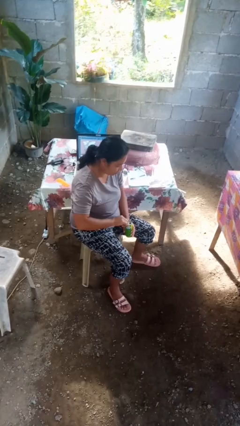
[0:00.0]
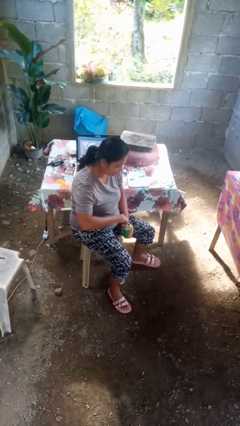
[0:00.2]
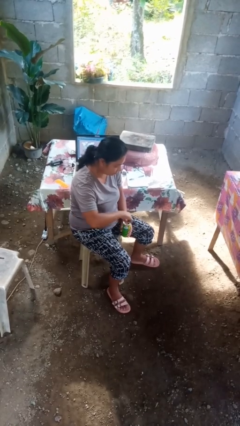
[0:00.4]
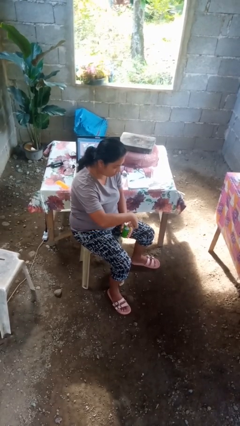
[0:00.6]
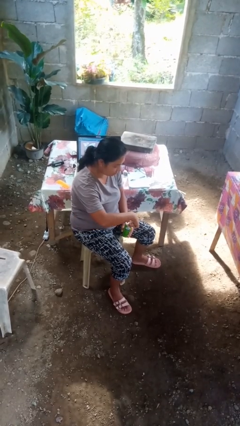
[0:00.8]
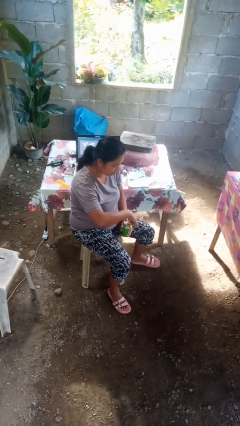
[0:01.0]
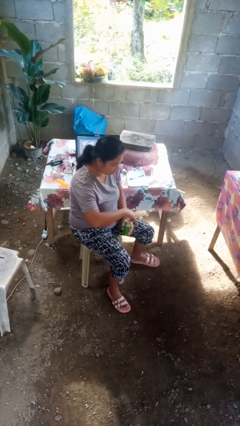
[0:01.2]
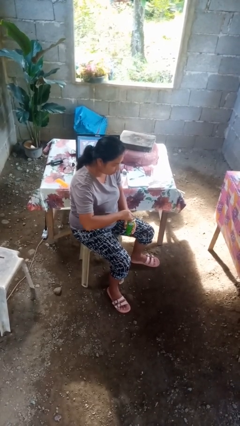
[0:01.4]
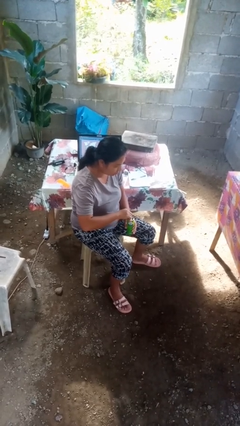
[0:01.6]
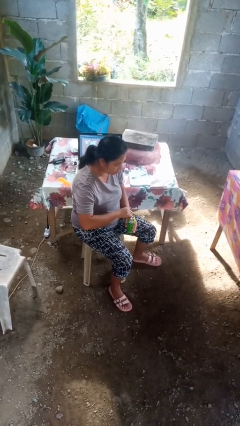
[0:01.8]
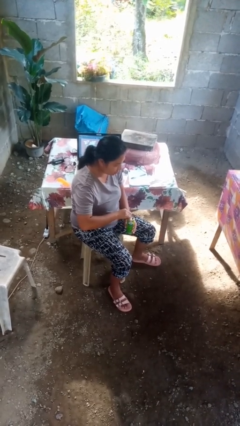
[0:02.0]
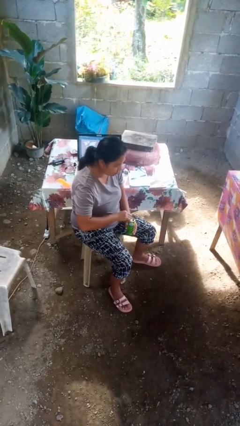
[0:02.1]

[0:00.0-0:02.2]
person opens beverage can

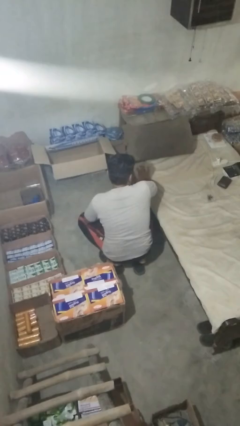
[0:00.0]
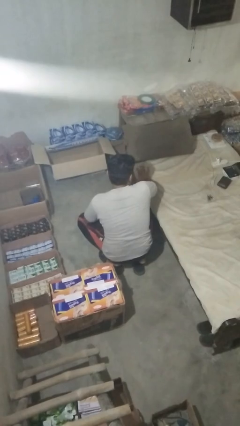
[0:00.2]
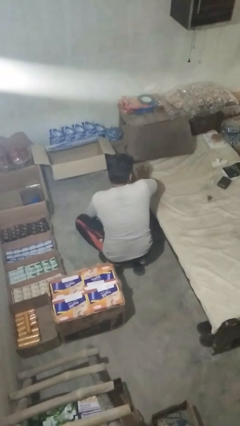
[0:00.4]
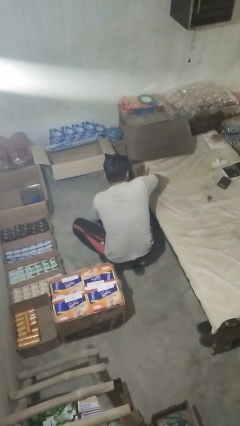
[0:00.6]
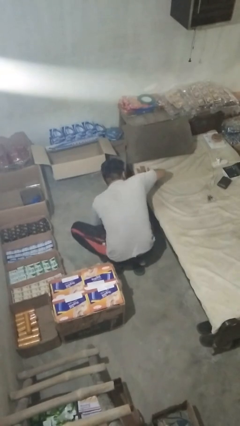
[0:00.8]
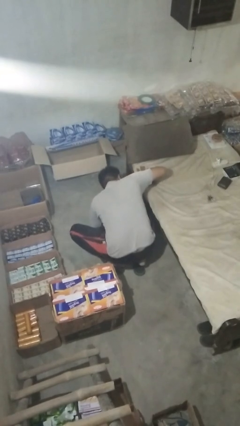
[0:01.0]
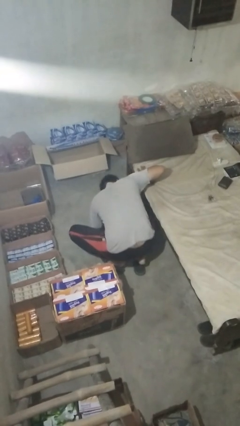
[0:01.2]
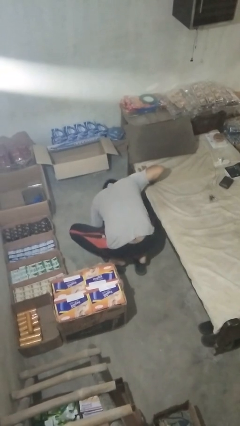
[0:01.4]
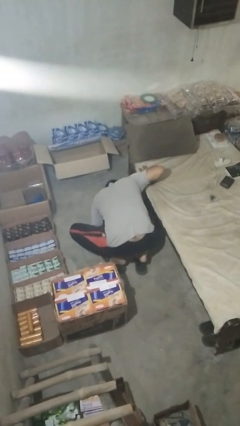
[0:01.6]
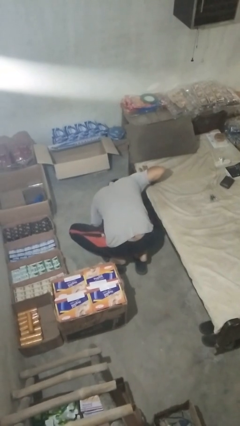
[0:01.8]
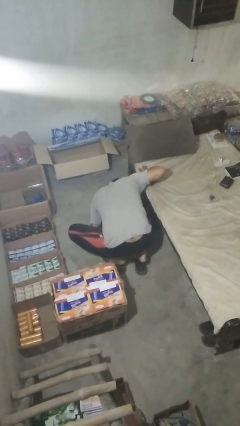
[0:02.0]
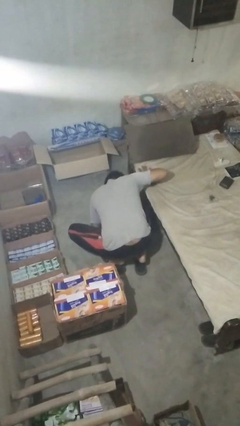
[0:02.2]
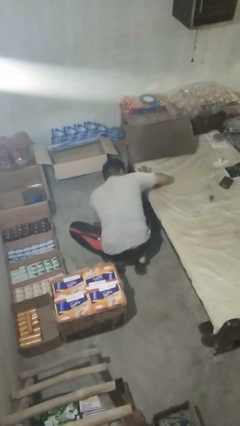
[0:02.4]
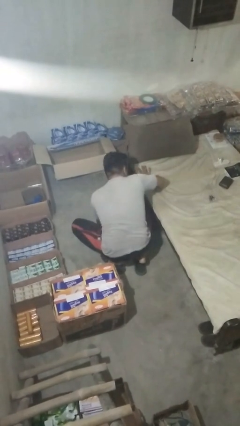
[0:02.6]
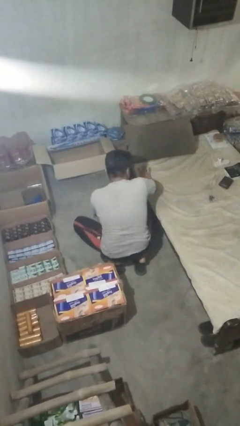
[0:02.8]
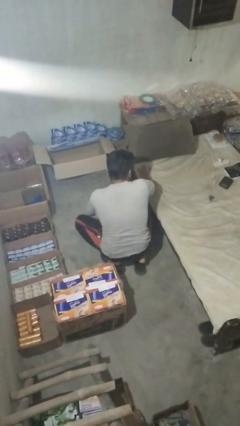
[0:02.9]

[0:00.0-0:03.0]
person searches under bed

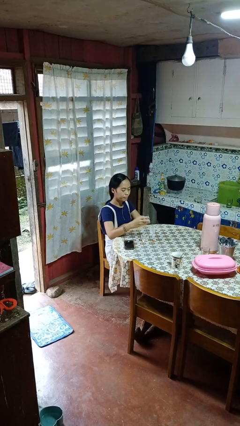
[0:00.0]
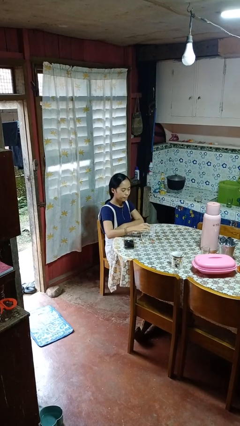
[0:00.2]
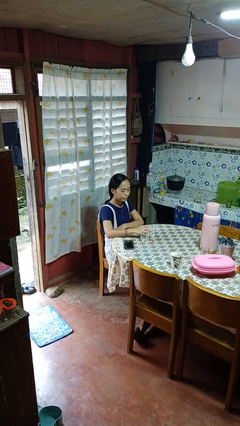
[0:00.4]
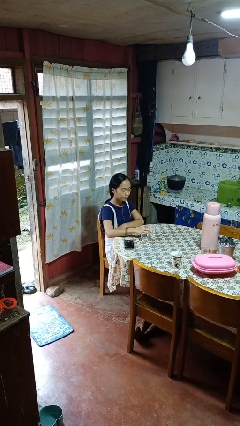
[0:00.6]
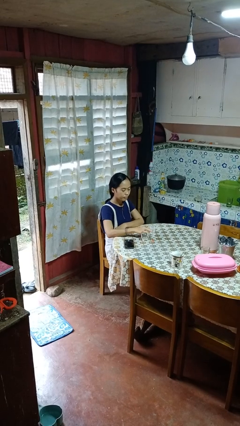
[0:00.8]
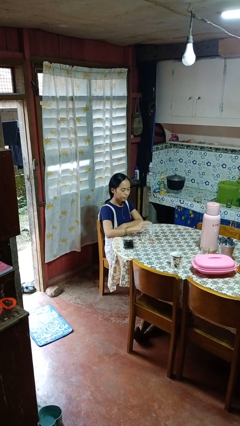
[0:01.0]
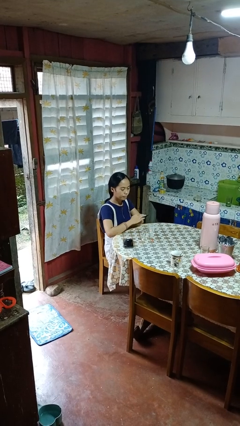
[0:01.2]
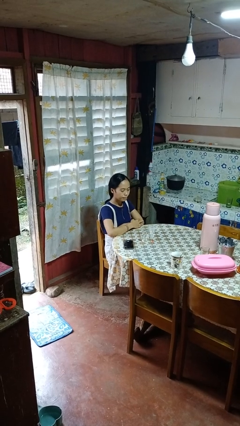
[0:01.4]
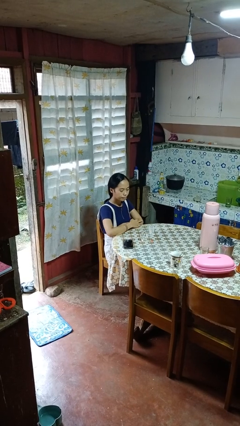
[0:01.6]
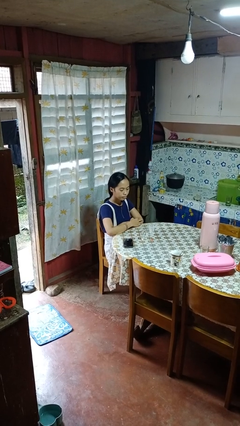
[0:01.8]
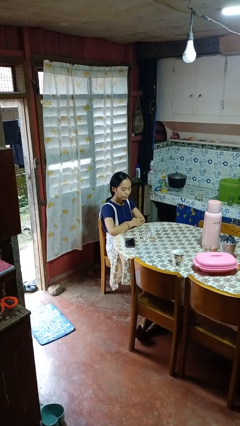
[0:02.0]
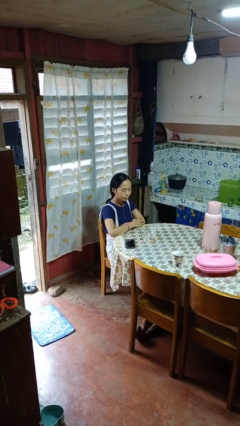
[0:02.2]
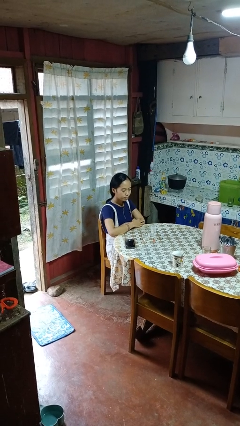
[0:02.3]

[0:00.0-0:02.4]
person puts down object on table

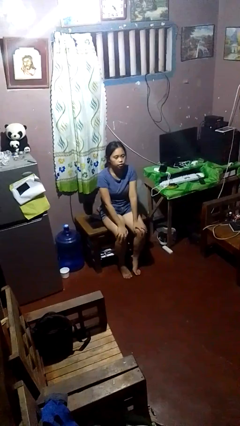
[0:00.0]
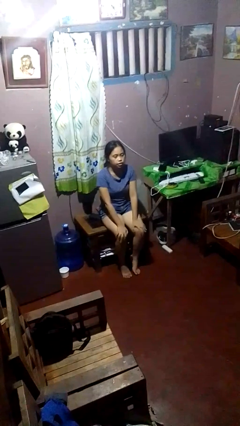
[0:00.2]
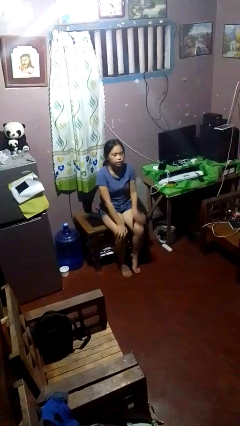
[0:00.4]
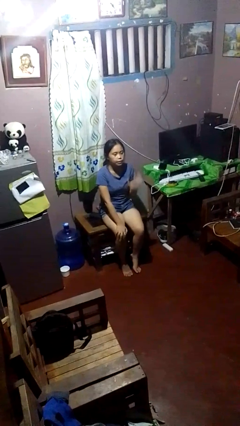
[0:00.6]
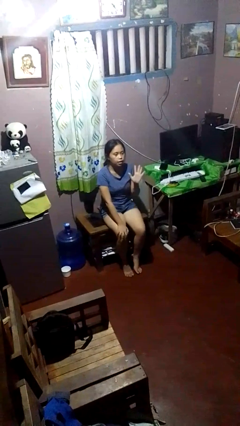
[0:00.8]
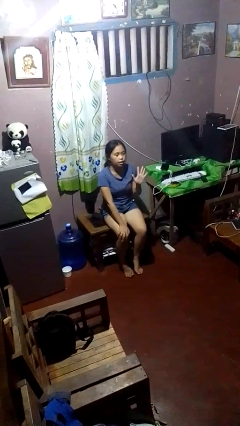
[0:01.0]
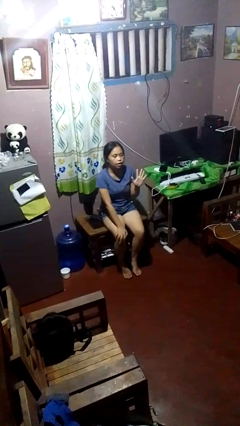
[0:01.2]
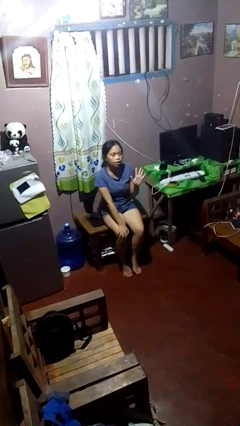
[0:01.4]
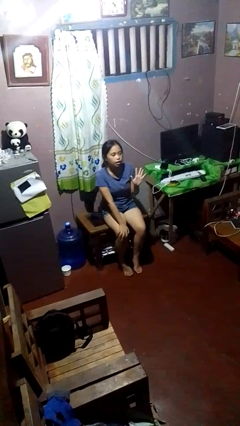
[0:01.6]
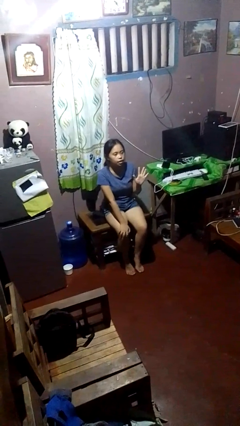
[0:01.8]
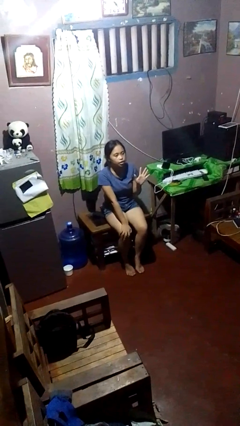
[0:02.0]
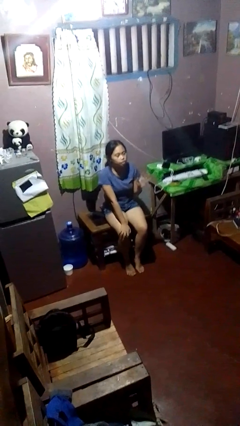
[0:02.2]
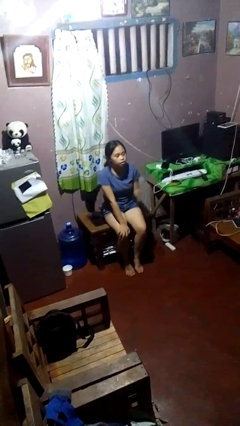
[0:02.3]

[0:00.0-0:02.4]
person gestures number five

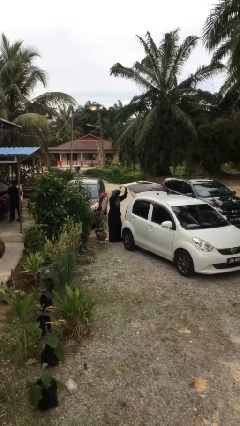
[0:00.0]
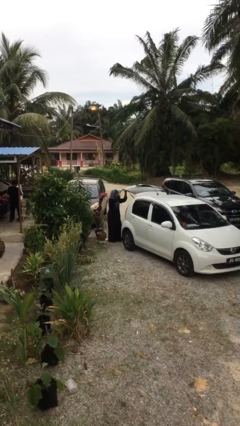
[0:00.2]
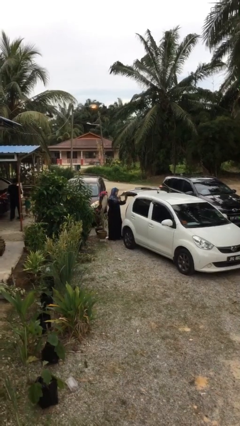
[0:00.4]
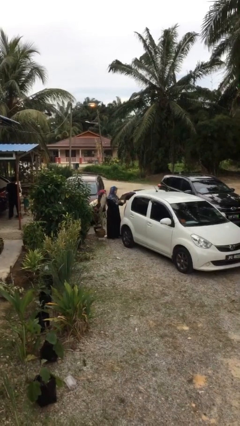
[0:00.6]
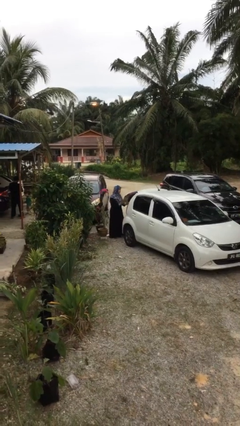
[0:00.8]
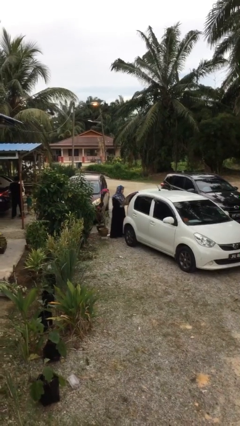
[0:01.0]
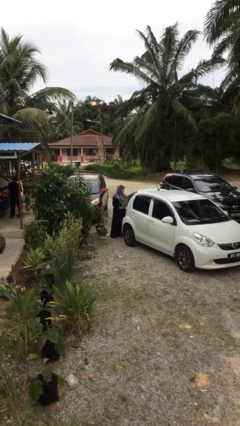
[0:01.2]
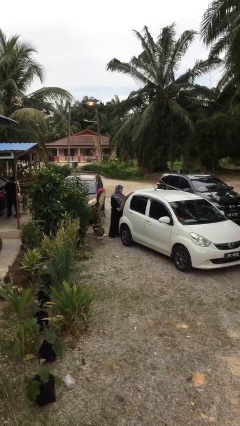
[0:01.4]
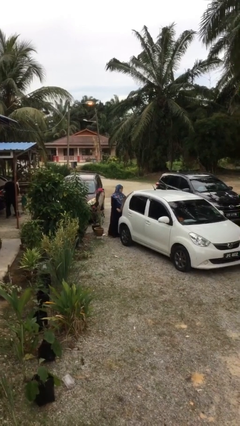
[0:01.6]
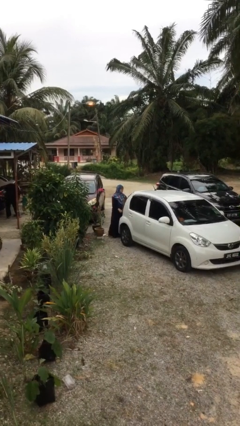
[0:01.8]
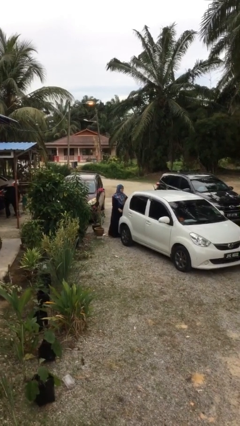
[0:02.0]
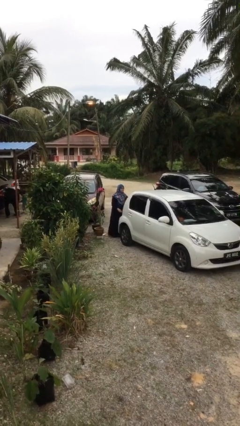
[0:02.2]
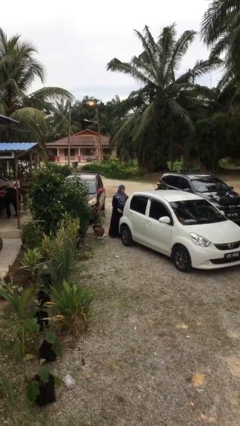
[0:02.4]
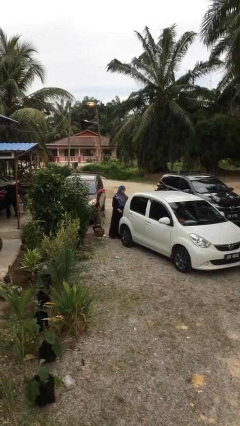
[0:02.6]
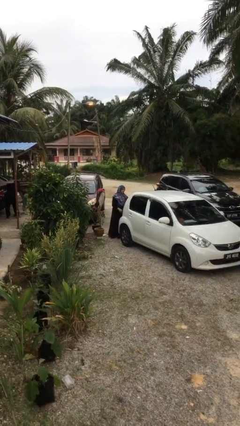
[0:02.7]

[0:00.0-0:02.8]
person closes car trunk

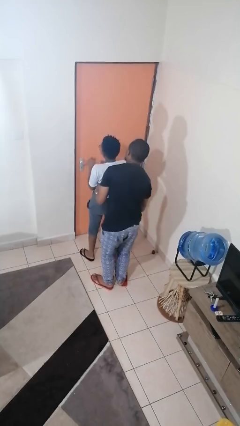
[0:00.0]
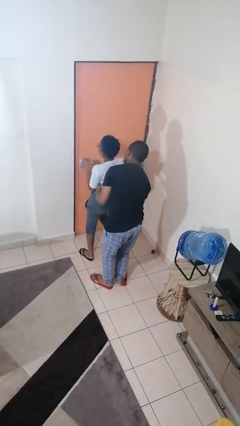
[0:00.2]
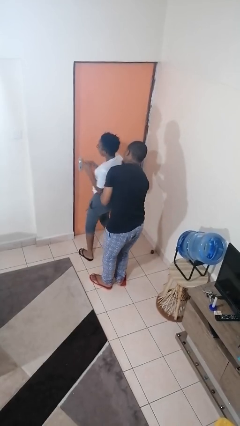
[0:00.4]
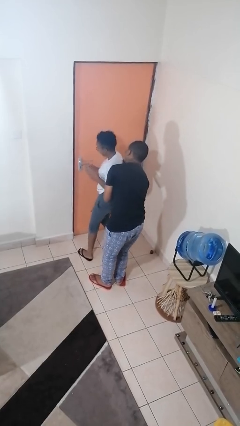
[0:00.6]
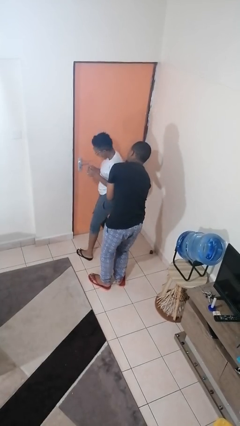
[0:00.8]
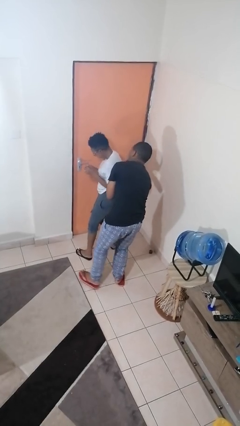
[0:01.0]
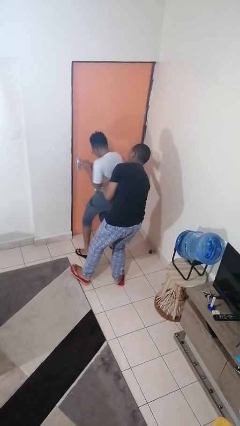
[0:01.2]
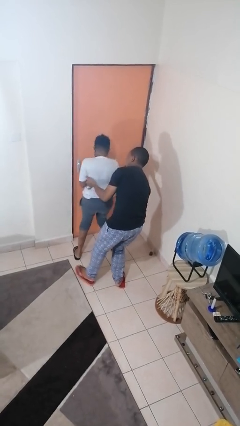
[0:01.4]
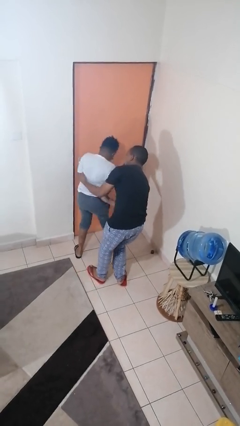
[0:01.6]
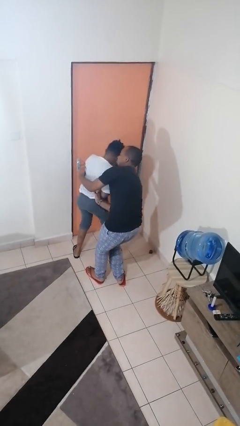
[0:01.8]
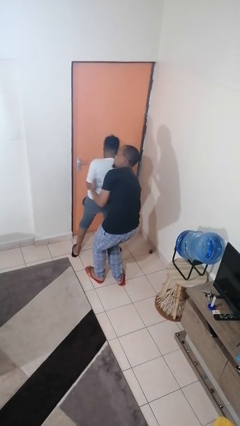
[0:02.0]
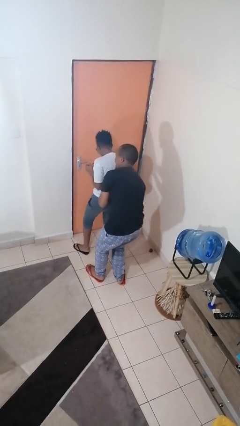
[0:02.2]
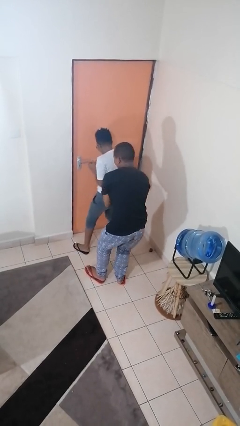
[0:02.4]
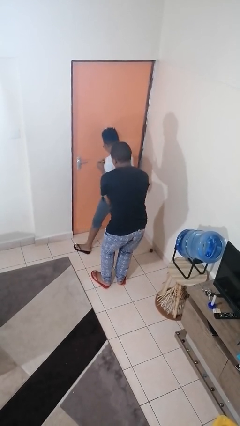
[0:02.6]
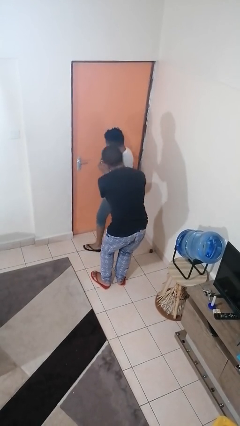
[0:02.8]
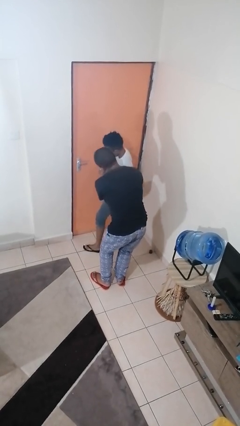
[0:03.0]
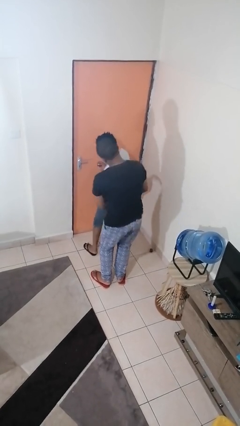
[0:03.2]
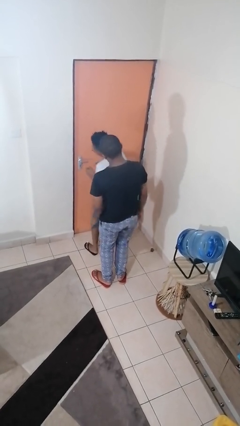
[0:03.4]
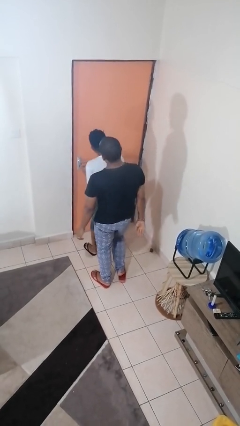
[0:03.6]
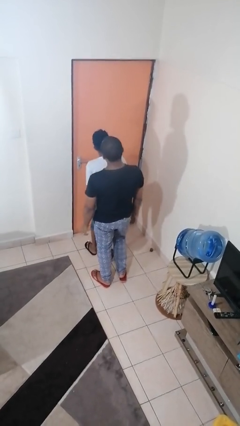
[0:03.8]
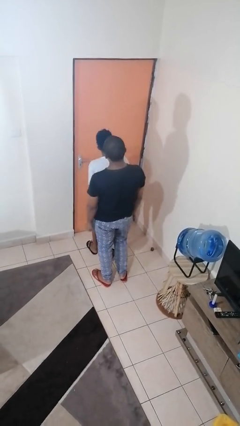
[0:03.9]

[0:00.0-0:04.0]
person tickles person
